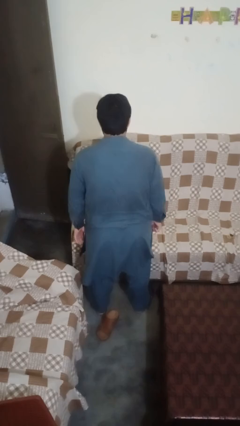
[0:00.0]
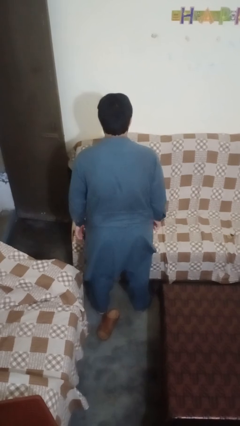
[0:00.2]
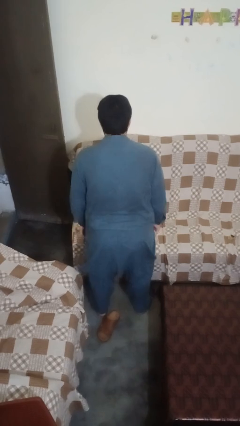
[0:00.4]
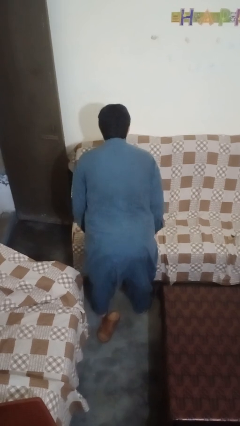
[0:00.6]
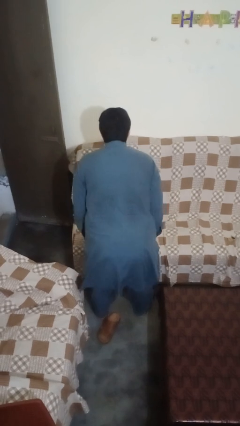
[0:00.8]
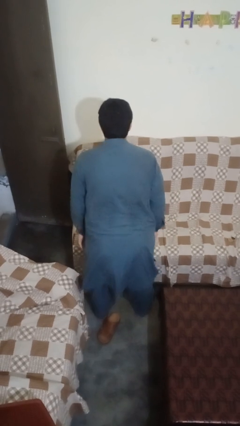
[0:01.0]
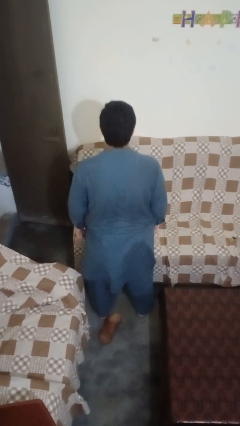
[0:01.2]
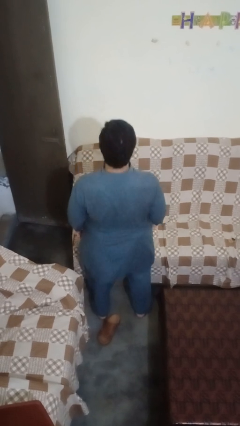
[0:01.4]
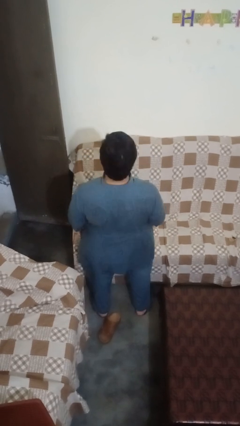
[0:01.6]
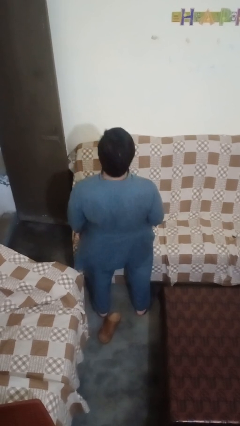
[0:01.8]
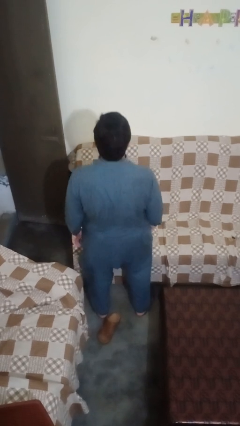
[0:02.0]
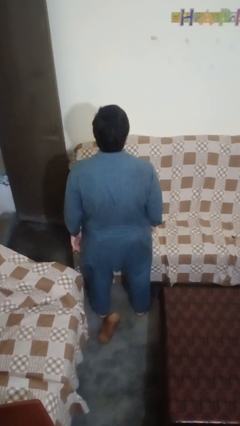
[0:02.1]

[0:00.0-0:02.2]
person wiggles hips

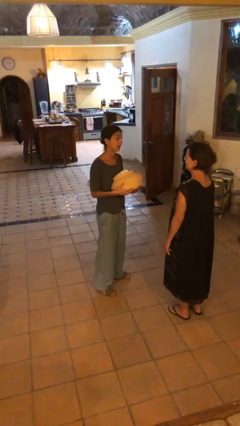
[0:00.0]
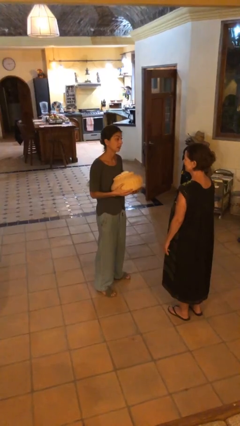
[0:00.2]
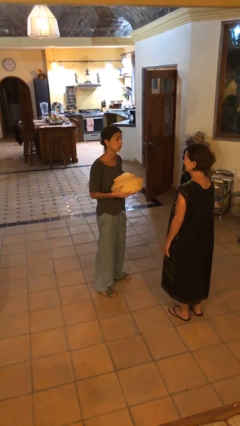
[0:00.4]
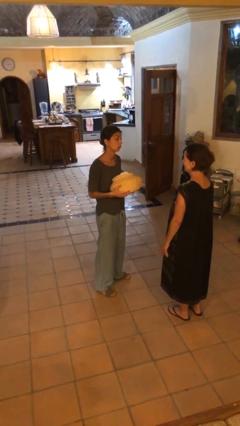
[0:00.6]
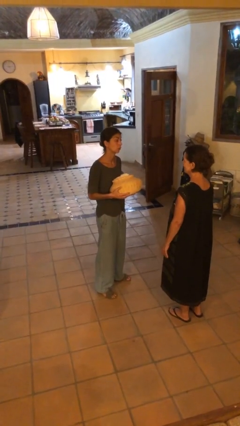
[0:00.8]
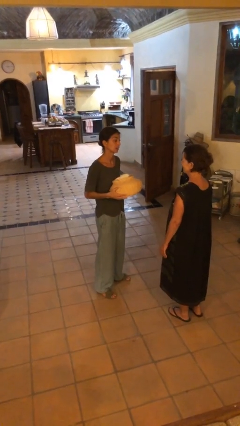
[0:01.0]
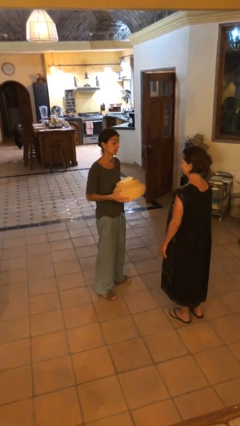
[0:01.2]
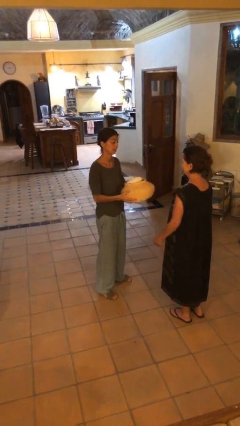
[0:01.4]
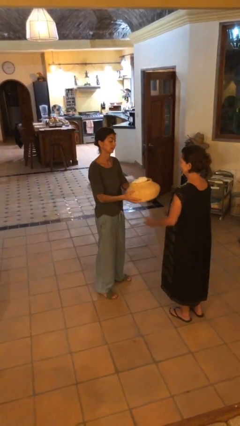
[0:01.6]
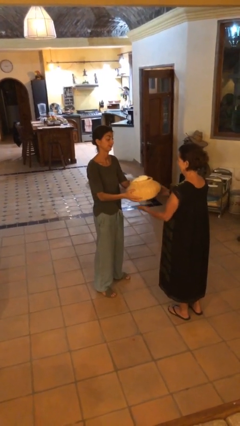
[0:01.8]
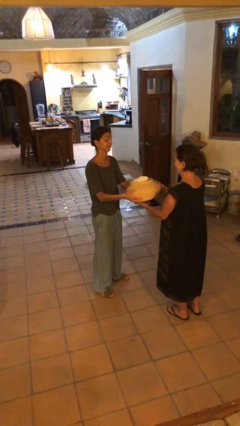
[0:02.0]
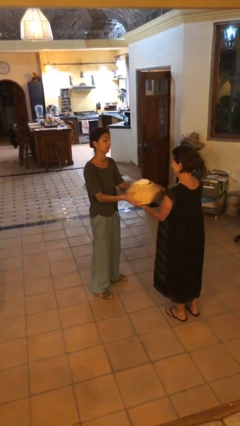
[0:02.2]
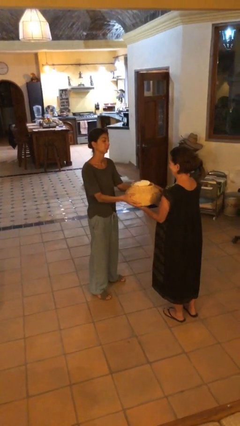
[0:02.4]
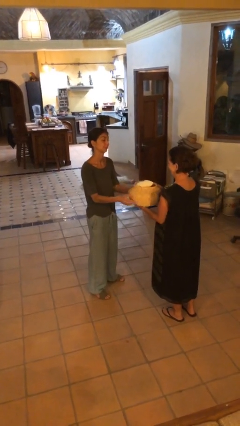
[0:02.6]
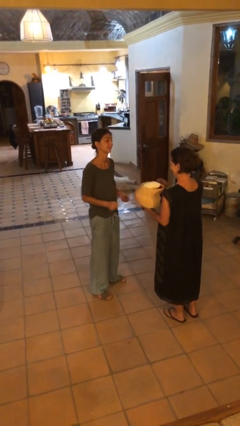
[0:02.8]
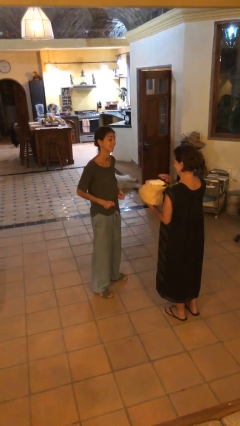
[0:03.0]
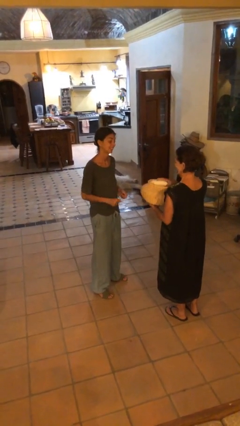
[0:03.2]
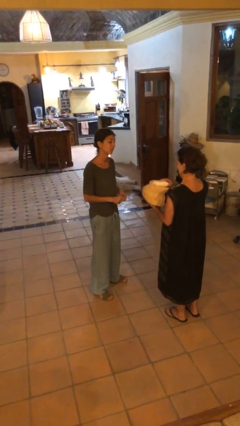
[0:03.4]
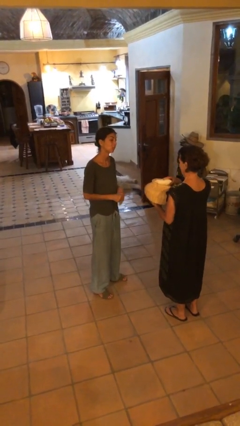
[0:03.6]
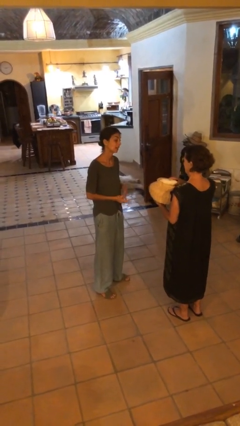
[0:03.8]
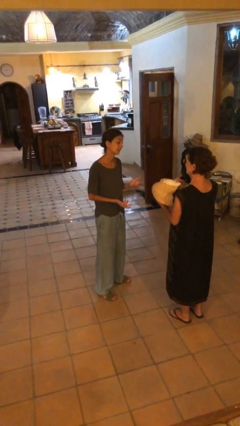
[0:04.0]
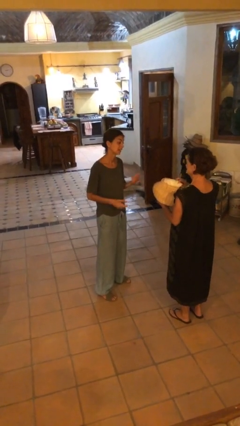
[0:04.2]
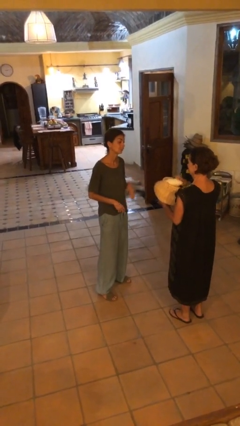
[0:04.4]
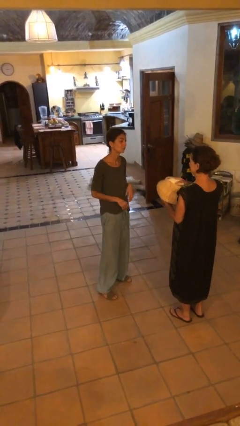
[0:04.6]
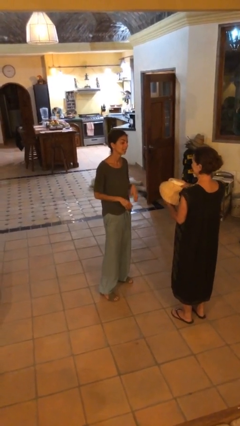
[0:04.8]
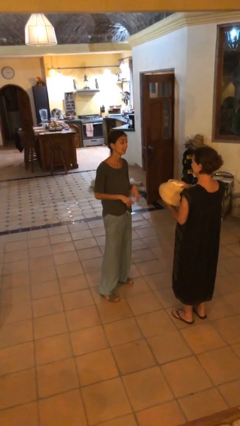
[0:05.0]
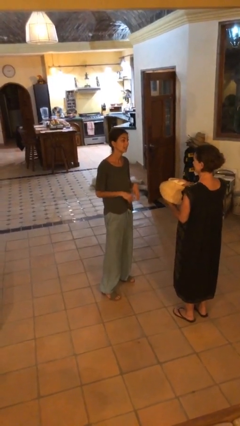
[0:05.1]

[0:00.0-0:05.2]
person transfers object to person

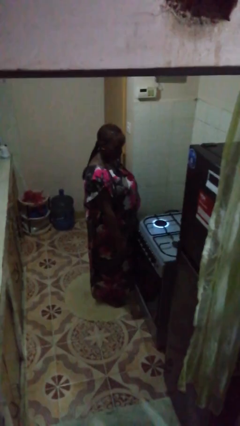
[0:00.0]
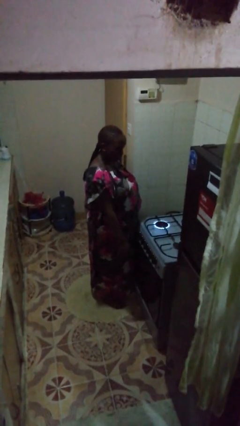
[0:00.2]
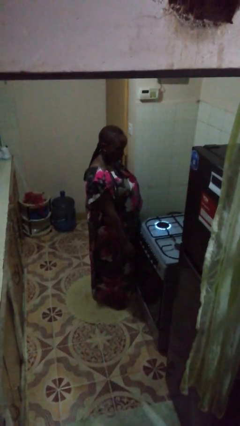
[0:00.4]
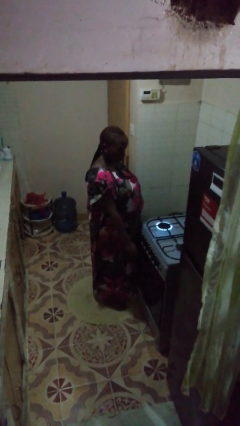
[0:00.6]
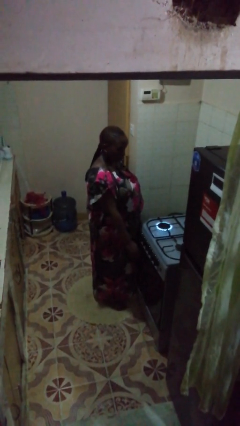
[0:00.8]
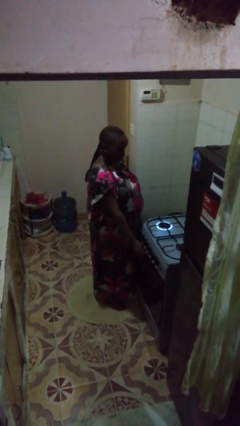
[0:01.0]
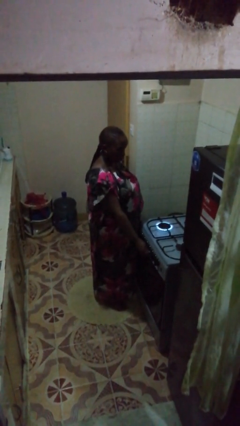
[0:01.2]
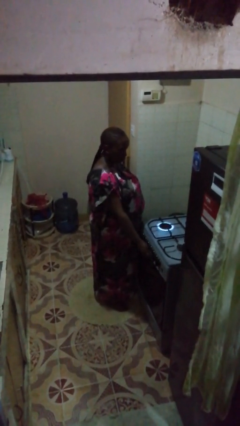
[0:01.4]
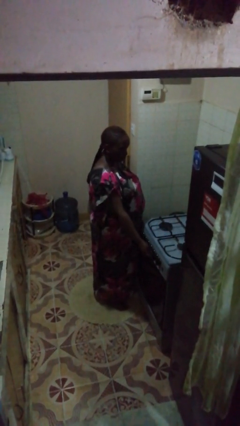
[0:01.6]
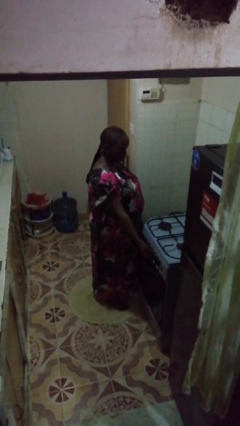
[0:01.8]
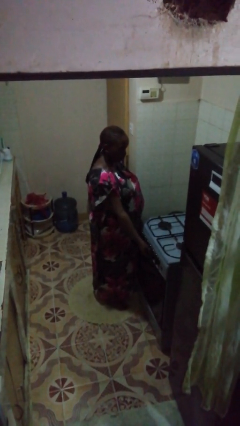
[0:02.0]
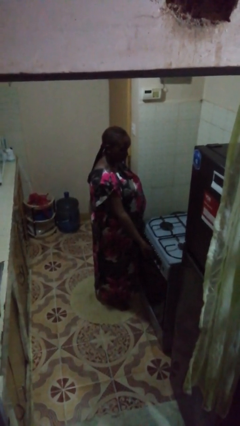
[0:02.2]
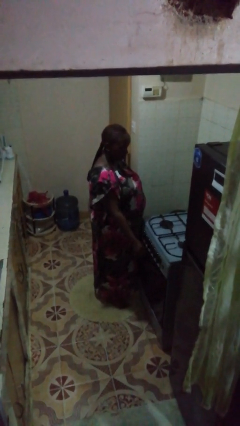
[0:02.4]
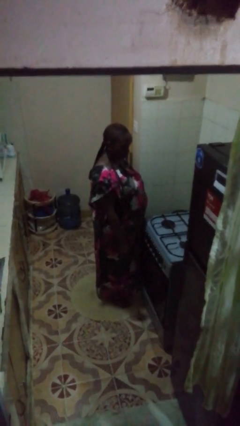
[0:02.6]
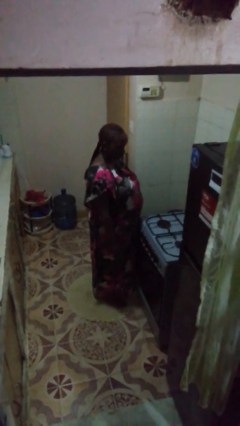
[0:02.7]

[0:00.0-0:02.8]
person turns off stovetop

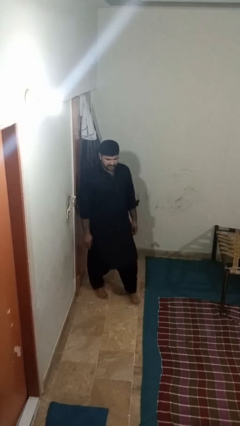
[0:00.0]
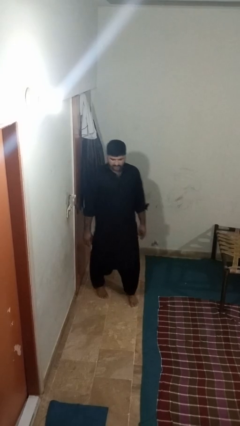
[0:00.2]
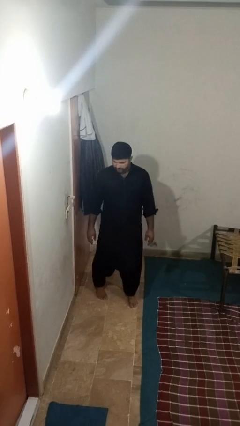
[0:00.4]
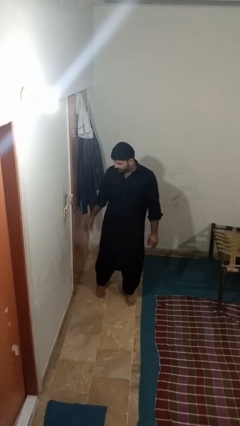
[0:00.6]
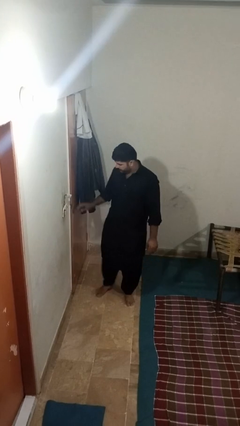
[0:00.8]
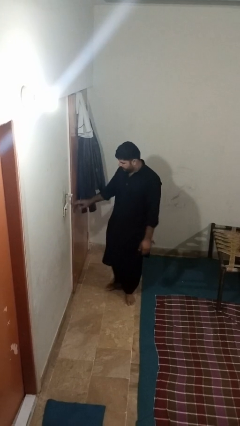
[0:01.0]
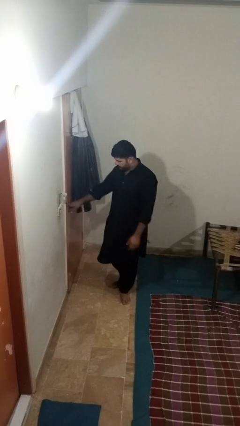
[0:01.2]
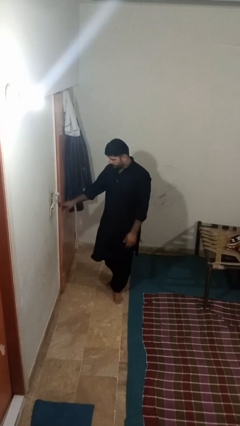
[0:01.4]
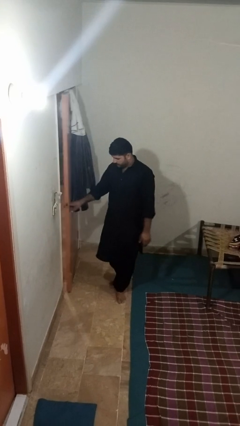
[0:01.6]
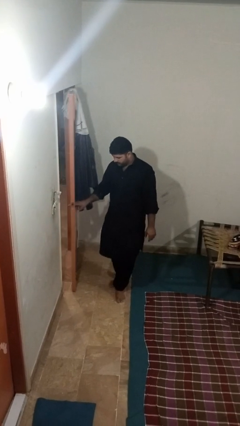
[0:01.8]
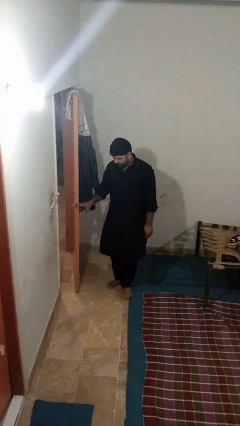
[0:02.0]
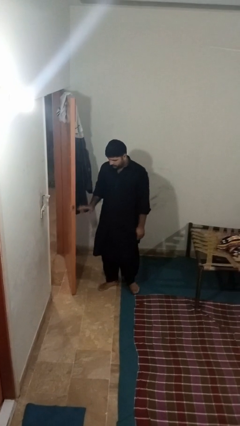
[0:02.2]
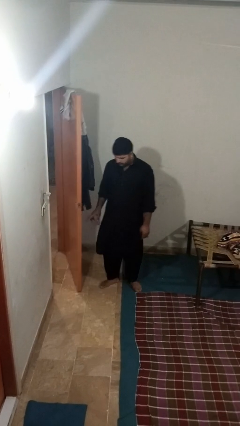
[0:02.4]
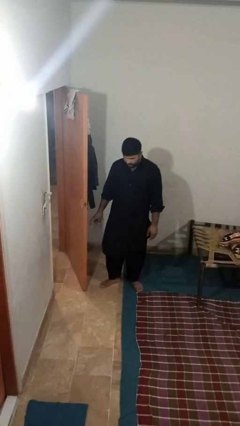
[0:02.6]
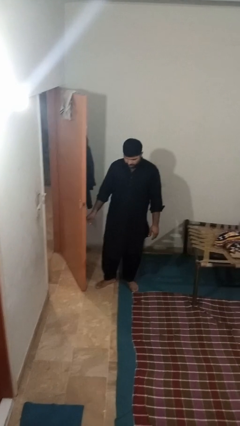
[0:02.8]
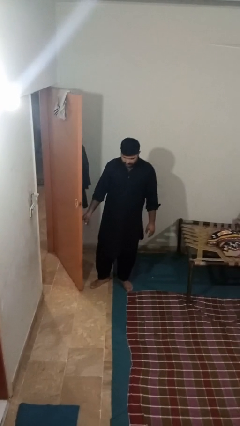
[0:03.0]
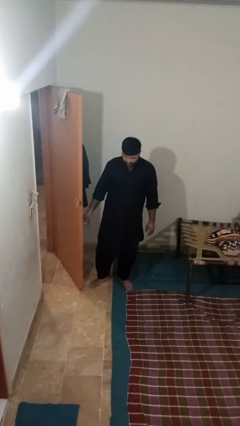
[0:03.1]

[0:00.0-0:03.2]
person opens facility door

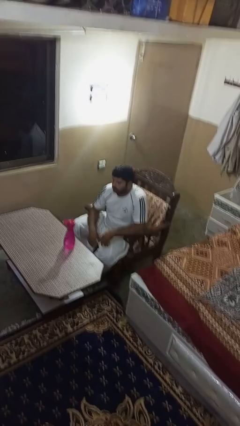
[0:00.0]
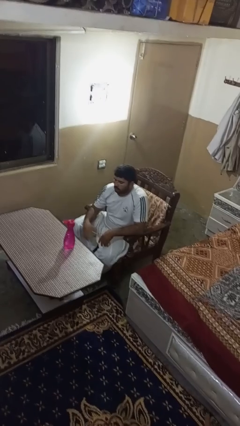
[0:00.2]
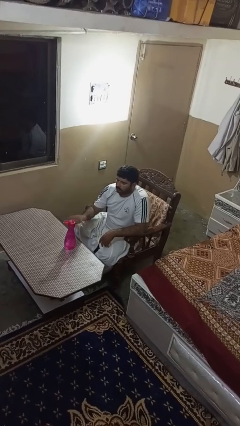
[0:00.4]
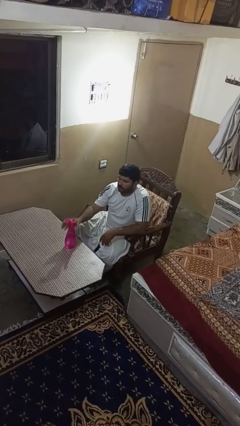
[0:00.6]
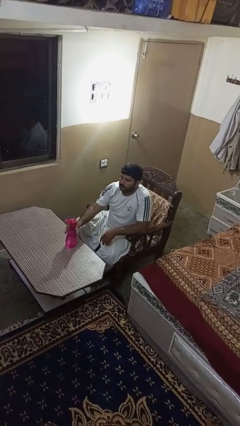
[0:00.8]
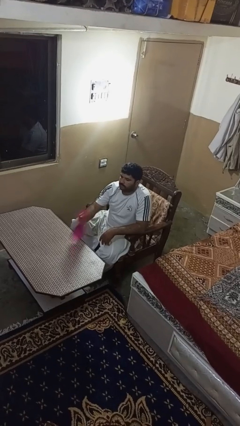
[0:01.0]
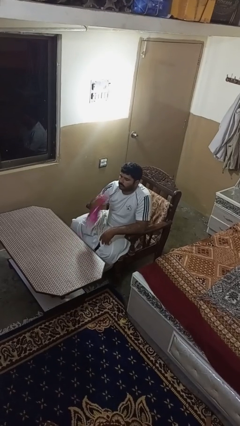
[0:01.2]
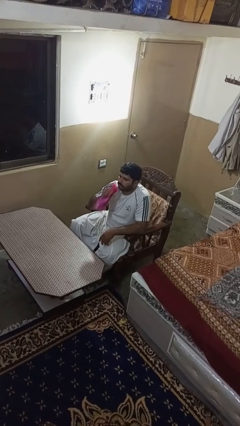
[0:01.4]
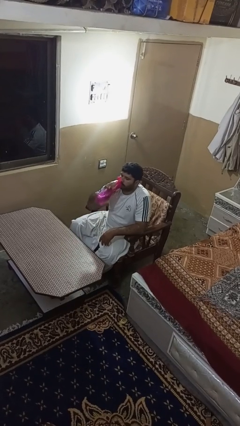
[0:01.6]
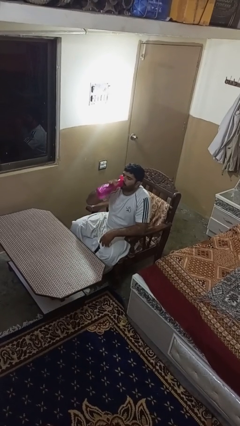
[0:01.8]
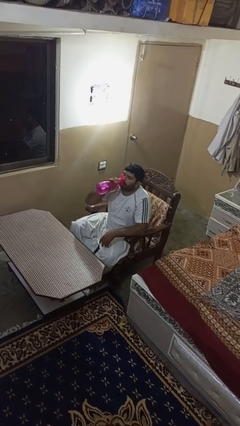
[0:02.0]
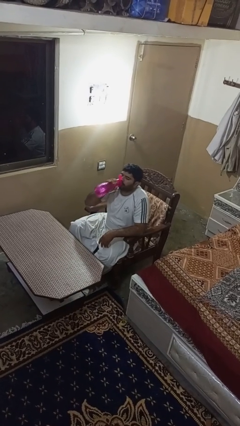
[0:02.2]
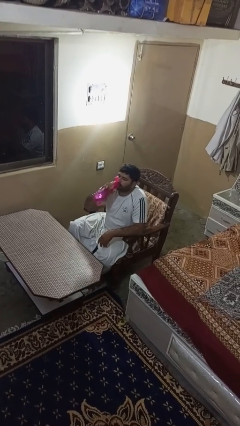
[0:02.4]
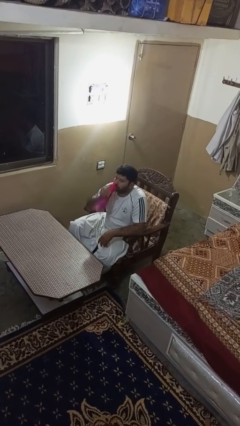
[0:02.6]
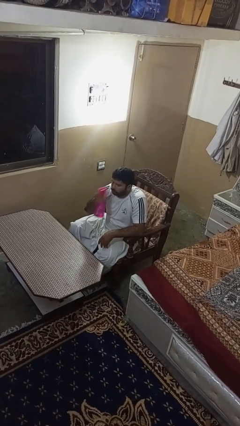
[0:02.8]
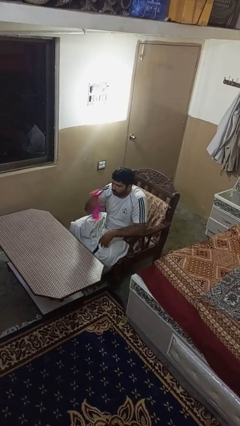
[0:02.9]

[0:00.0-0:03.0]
person drinks from bottle

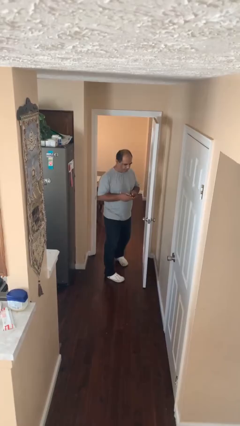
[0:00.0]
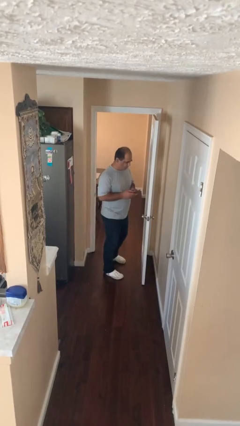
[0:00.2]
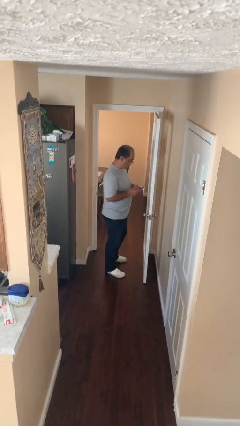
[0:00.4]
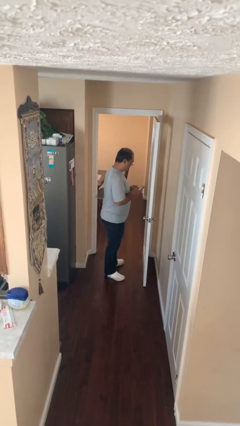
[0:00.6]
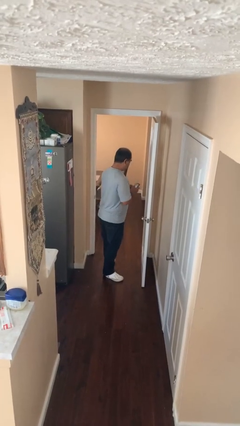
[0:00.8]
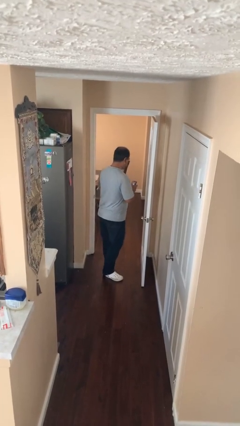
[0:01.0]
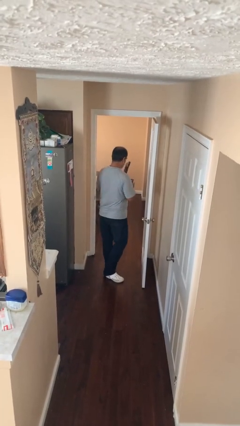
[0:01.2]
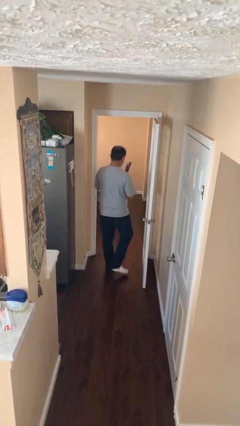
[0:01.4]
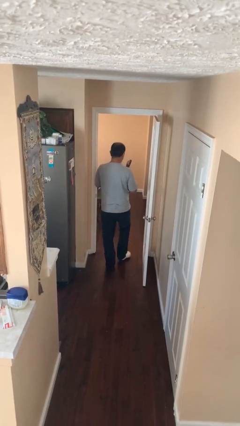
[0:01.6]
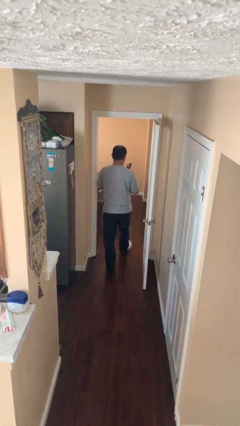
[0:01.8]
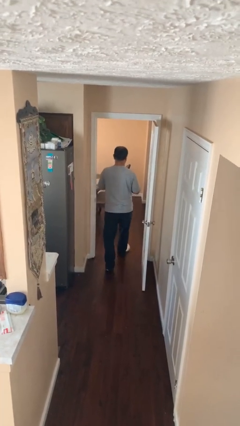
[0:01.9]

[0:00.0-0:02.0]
person exits scene through structure
